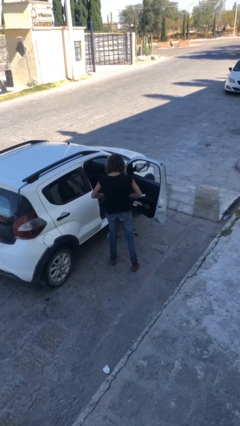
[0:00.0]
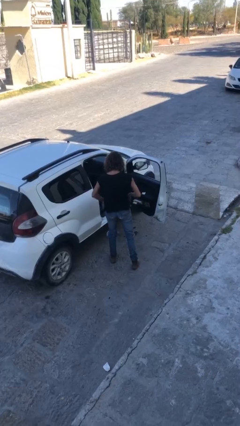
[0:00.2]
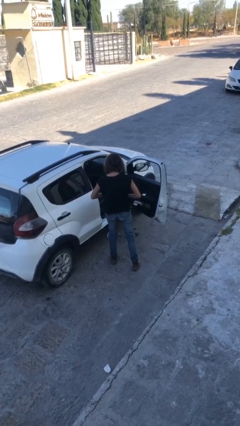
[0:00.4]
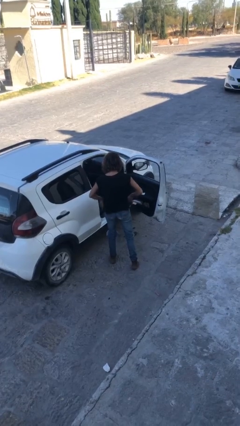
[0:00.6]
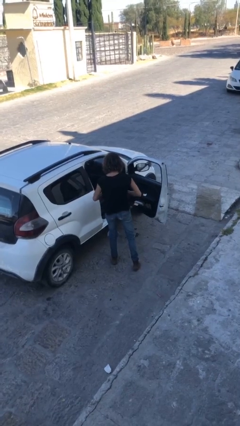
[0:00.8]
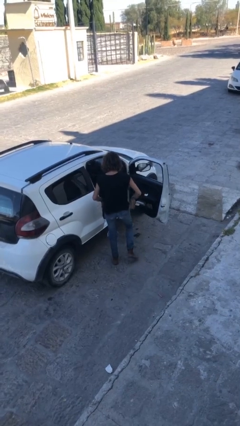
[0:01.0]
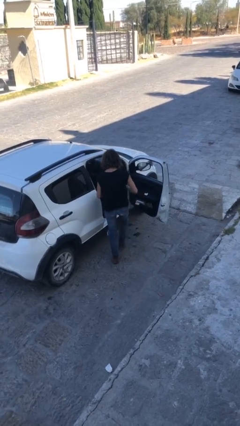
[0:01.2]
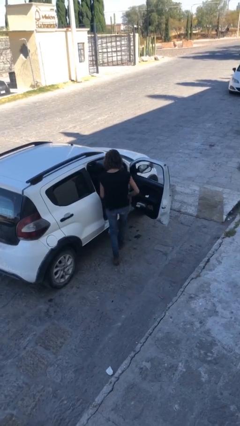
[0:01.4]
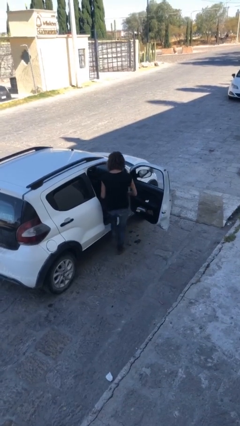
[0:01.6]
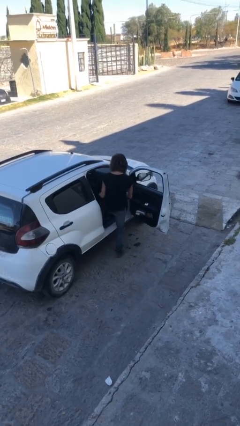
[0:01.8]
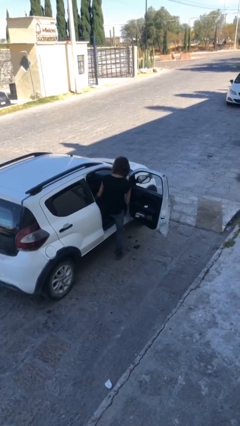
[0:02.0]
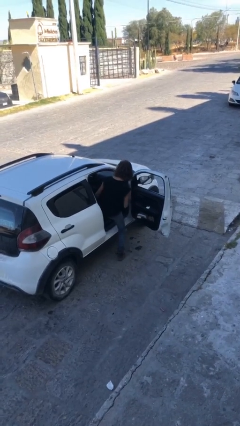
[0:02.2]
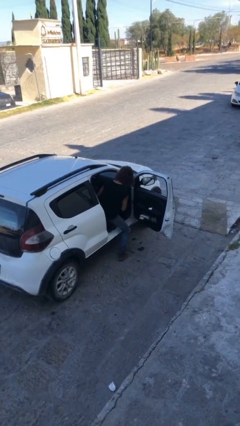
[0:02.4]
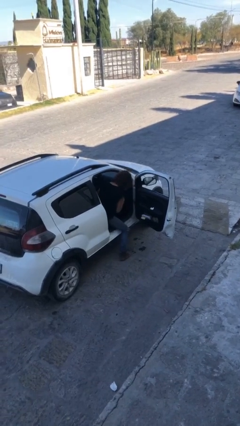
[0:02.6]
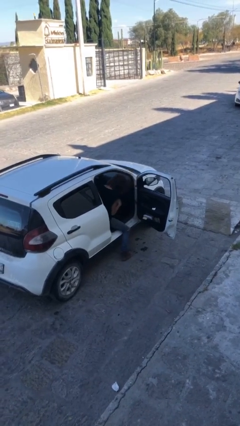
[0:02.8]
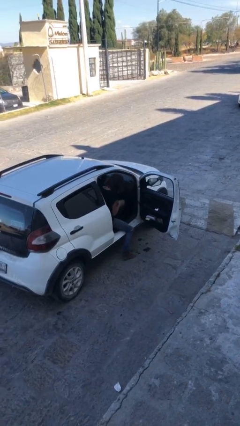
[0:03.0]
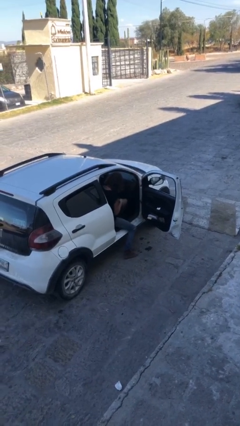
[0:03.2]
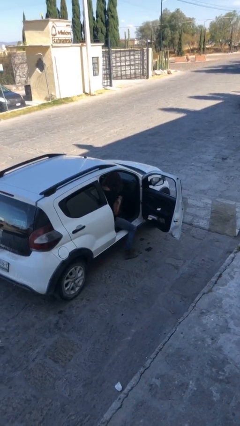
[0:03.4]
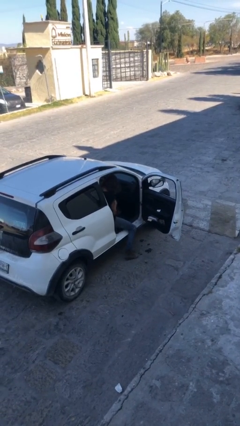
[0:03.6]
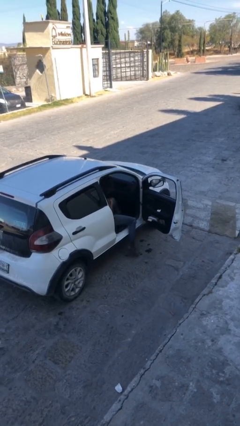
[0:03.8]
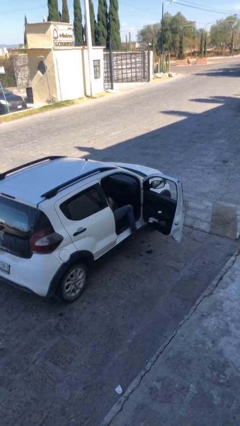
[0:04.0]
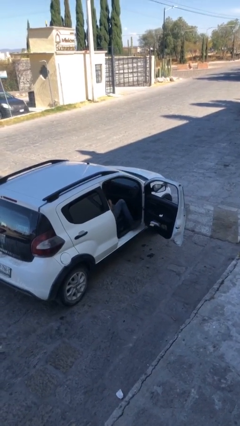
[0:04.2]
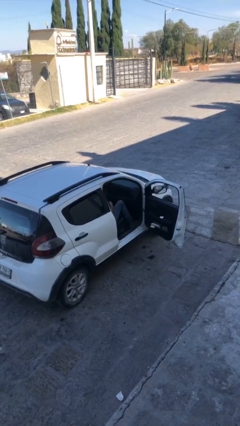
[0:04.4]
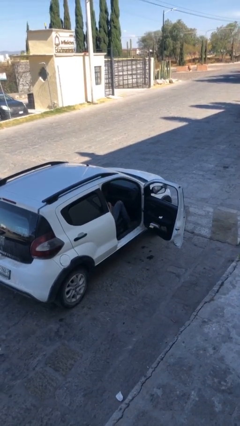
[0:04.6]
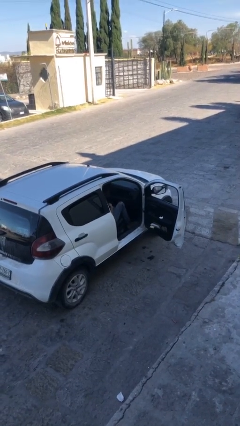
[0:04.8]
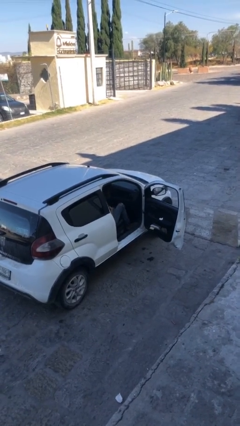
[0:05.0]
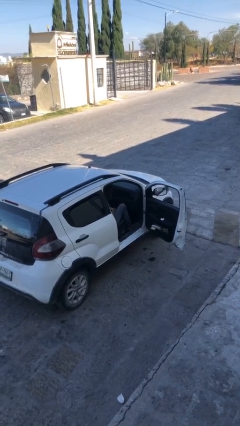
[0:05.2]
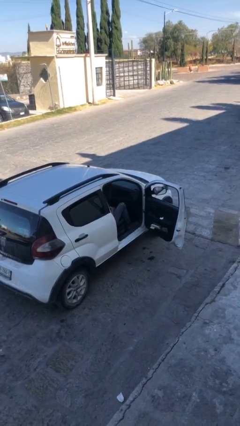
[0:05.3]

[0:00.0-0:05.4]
person enters car

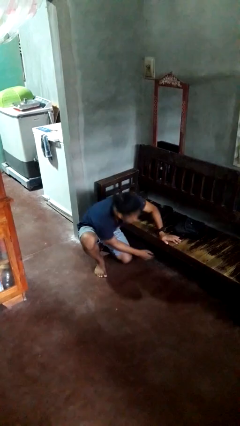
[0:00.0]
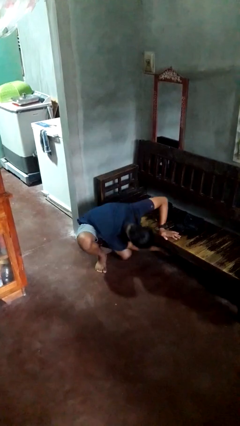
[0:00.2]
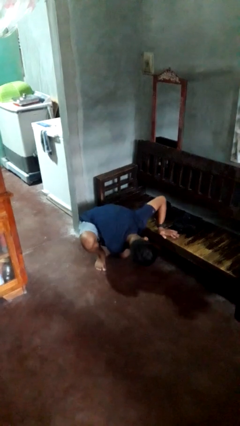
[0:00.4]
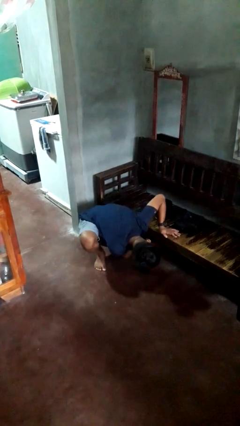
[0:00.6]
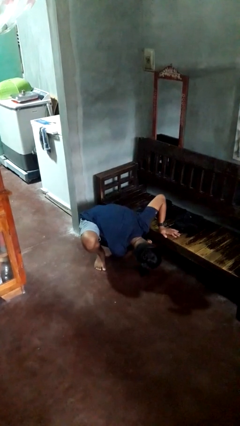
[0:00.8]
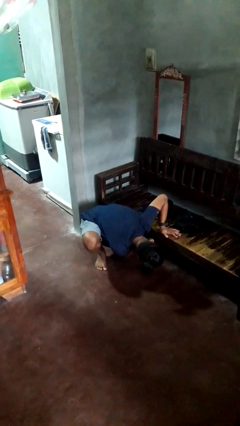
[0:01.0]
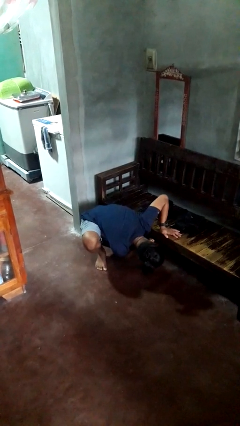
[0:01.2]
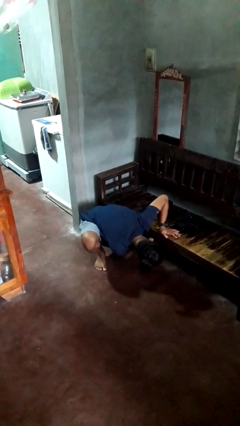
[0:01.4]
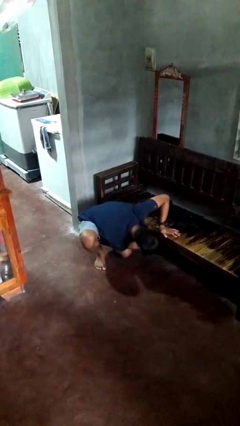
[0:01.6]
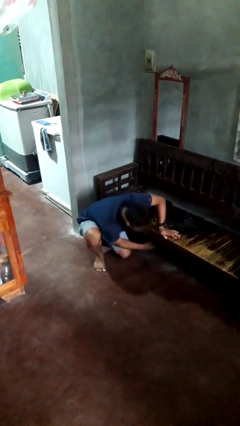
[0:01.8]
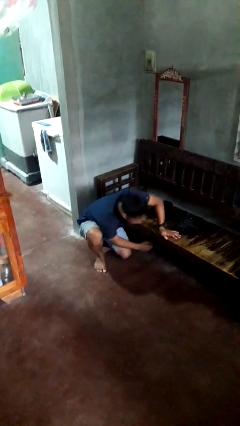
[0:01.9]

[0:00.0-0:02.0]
person searches under couch

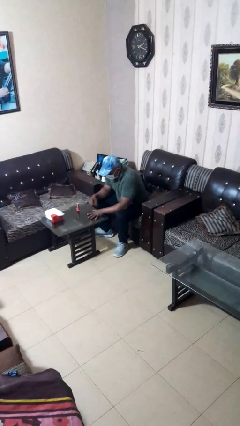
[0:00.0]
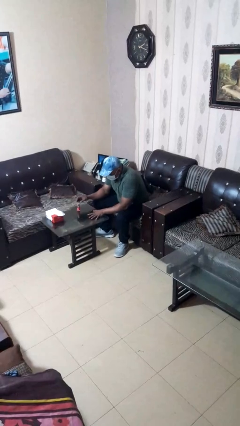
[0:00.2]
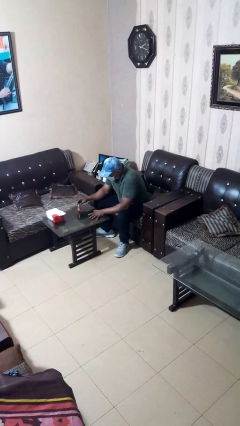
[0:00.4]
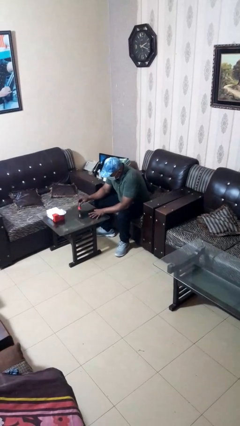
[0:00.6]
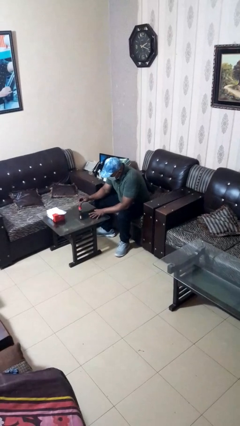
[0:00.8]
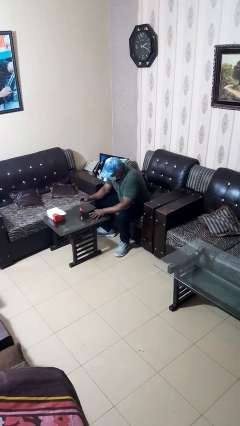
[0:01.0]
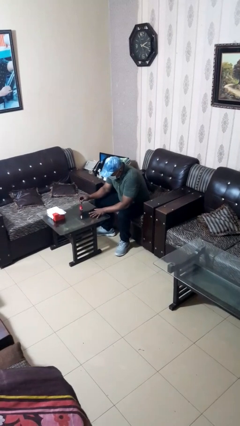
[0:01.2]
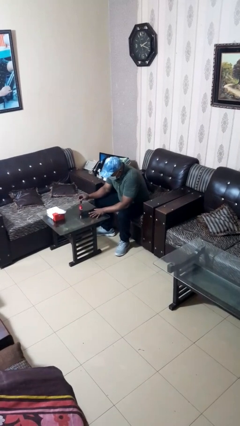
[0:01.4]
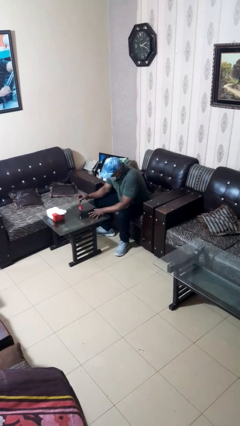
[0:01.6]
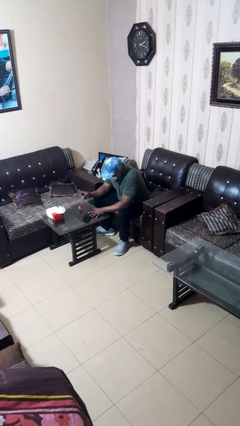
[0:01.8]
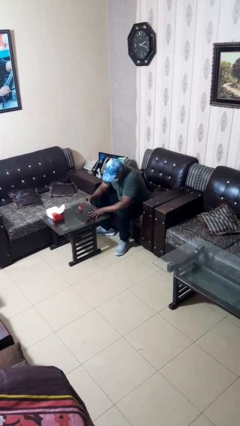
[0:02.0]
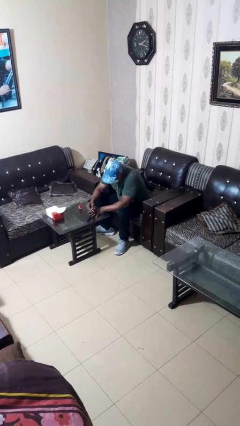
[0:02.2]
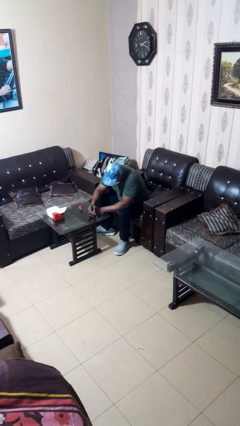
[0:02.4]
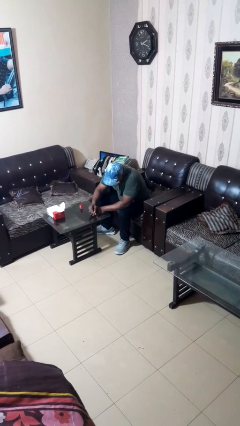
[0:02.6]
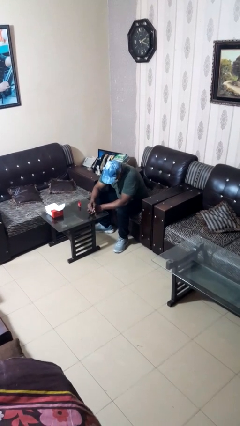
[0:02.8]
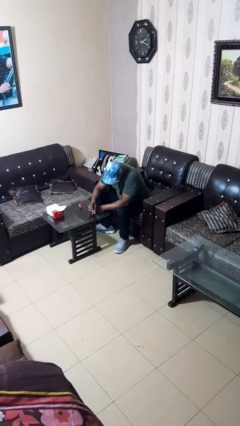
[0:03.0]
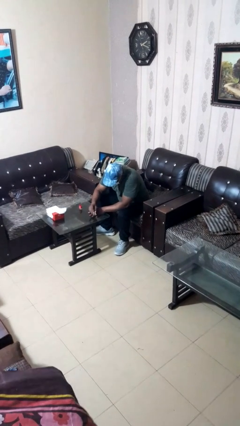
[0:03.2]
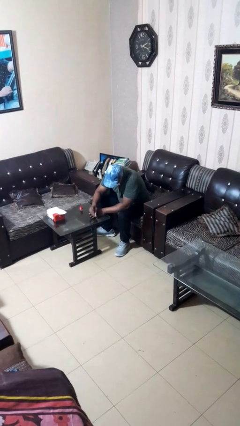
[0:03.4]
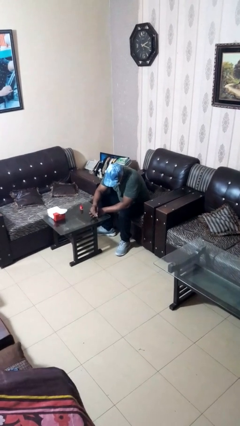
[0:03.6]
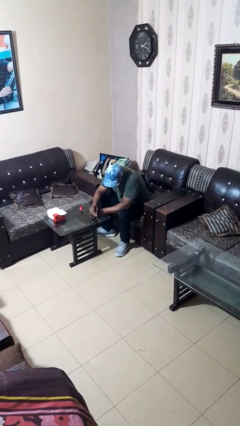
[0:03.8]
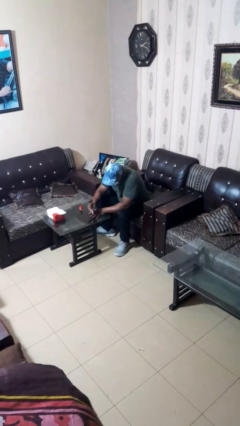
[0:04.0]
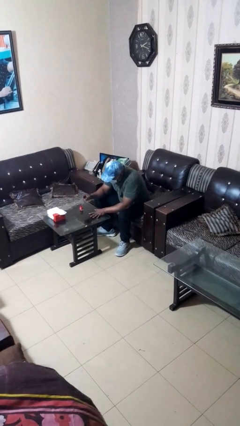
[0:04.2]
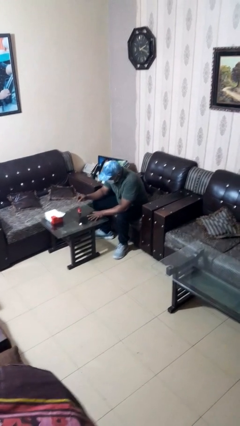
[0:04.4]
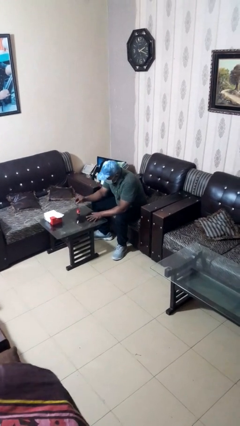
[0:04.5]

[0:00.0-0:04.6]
person paints fingernails

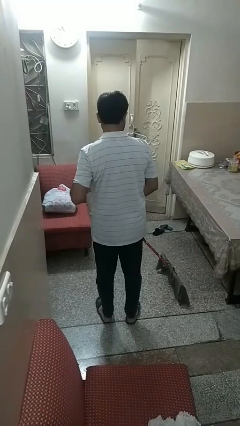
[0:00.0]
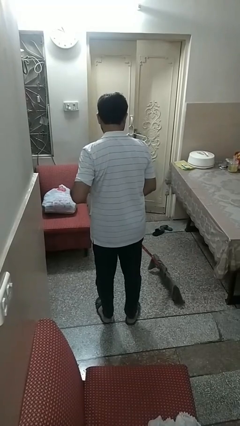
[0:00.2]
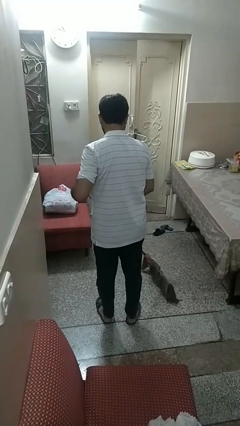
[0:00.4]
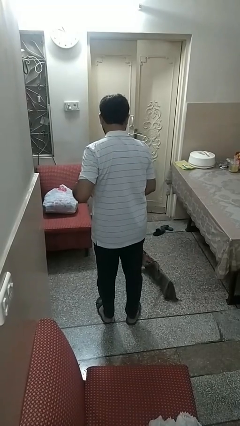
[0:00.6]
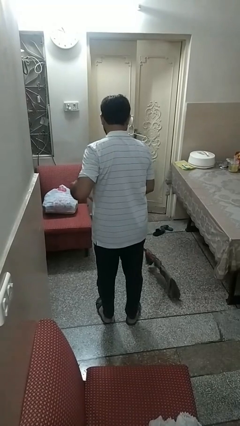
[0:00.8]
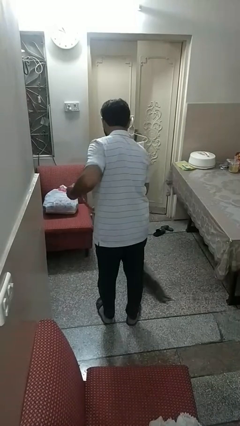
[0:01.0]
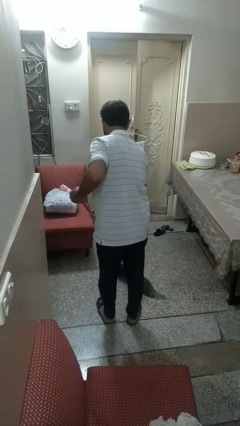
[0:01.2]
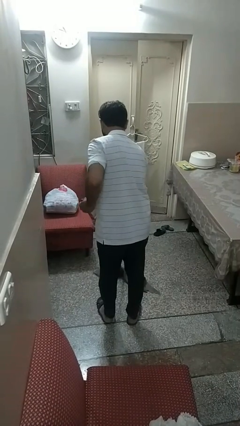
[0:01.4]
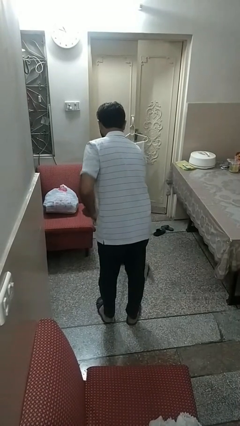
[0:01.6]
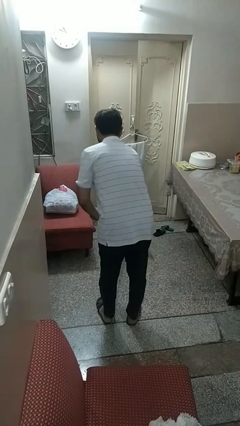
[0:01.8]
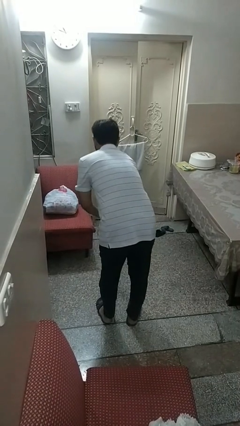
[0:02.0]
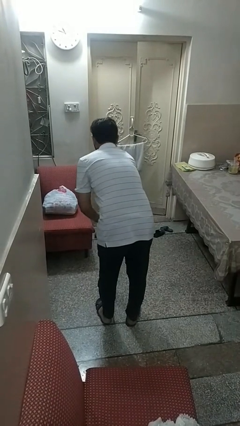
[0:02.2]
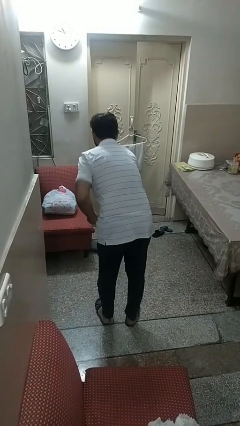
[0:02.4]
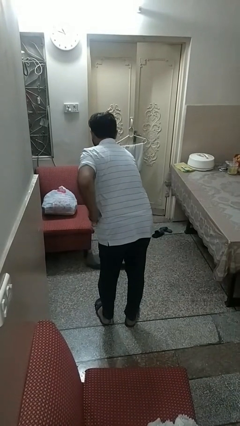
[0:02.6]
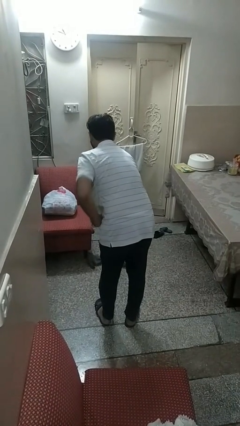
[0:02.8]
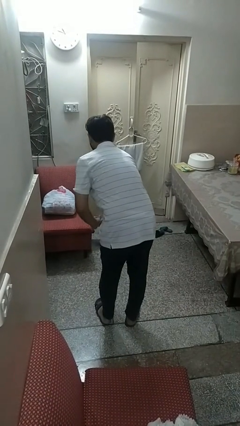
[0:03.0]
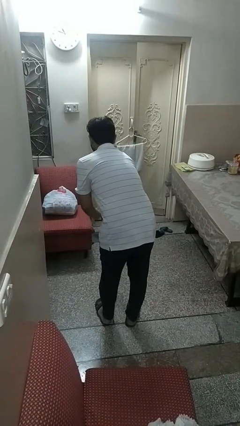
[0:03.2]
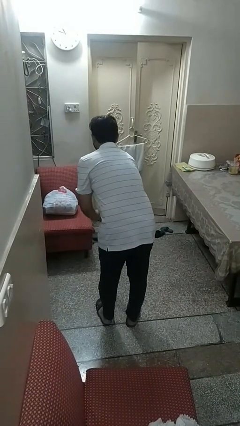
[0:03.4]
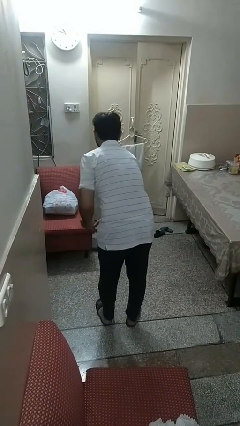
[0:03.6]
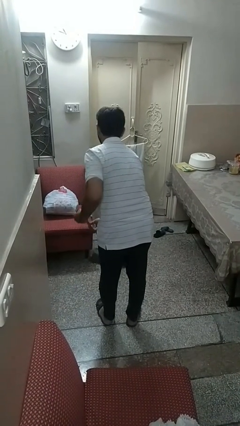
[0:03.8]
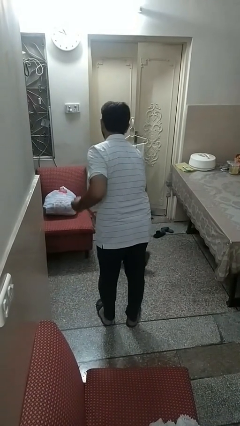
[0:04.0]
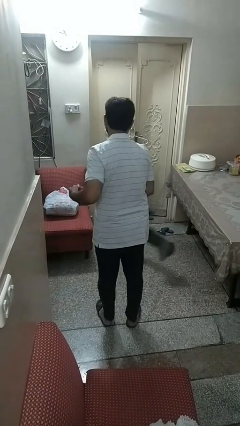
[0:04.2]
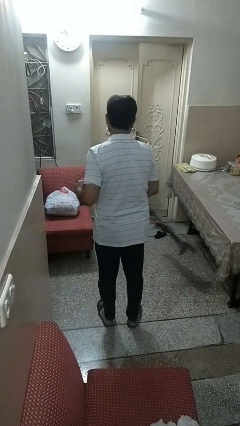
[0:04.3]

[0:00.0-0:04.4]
person mops

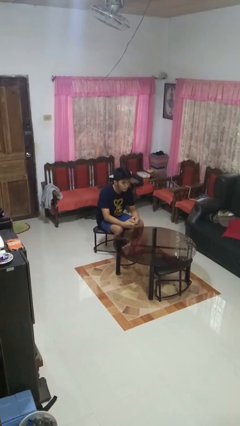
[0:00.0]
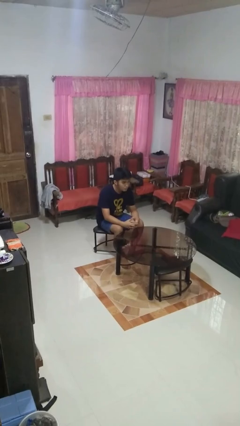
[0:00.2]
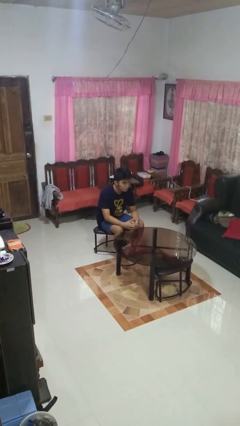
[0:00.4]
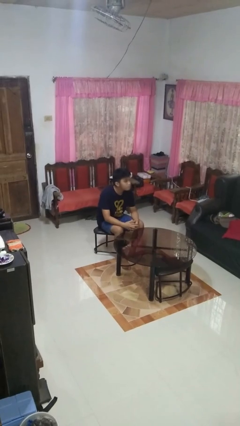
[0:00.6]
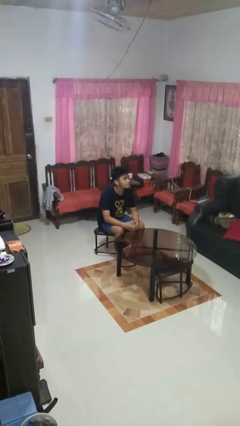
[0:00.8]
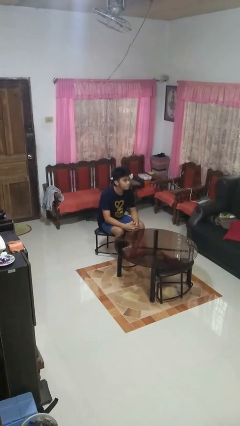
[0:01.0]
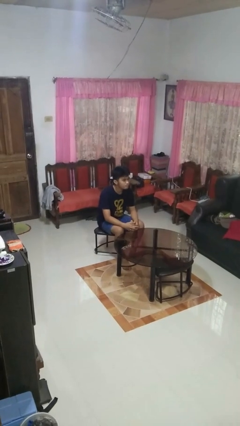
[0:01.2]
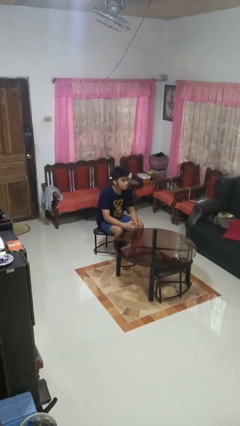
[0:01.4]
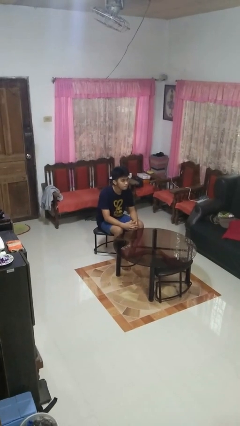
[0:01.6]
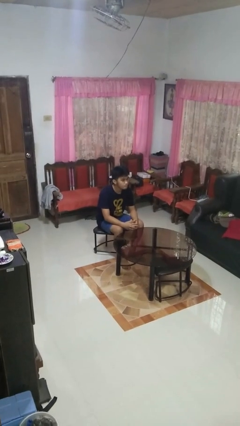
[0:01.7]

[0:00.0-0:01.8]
person nods head
